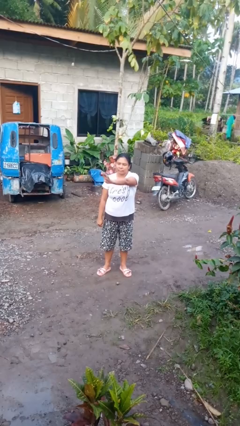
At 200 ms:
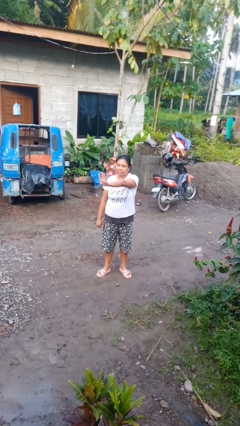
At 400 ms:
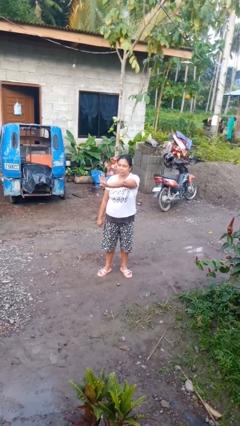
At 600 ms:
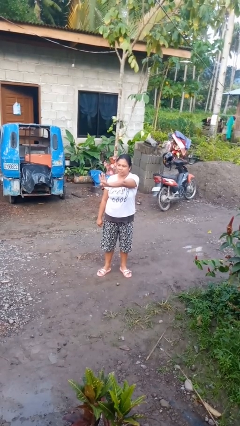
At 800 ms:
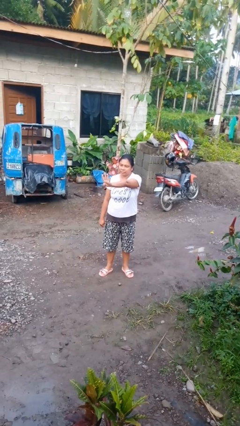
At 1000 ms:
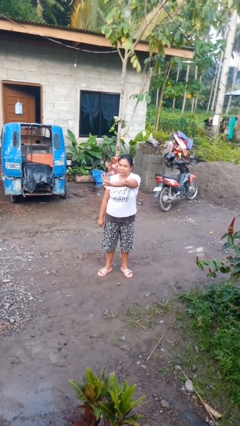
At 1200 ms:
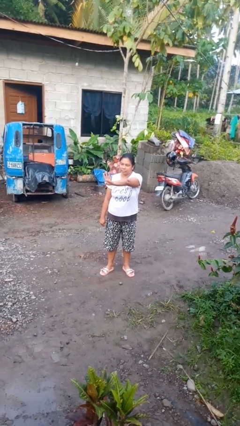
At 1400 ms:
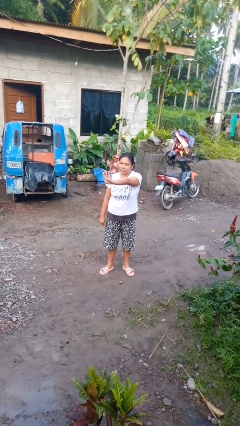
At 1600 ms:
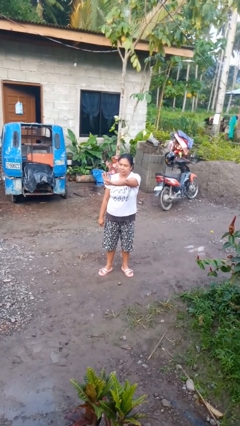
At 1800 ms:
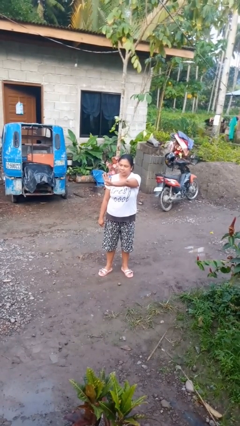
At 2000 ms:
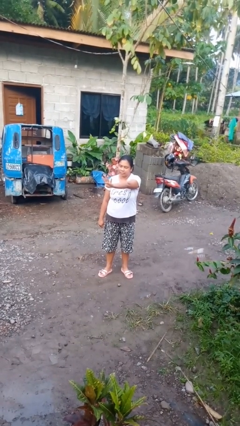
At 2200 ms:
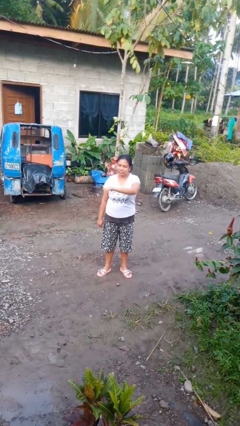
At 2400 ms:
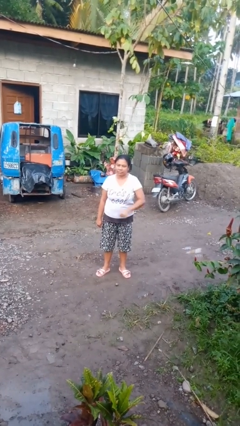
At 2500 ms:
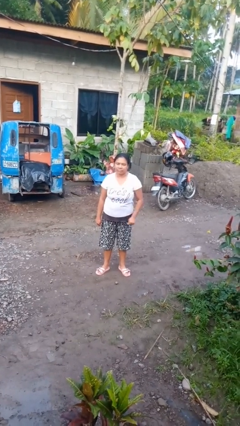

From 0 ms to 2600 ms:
person gestures number four

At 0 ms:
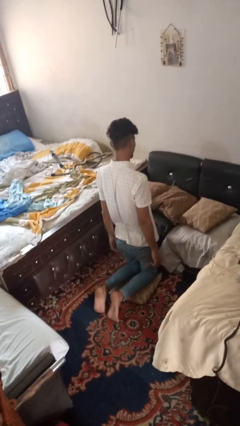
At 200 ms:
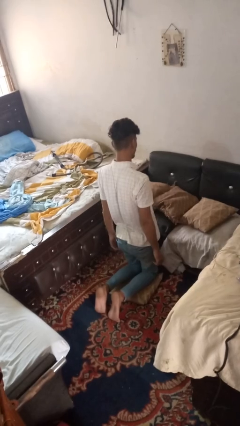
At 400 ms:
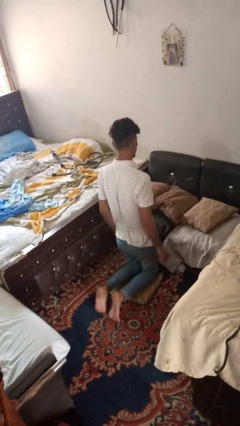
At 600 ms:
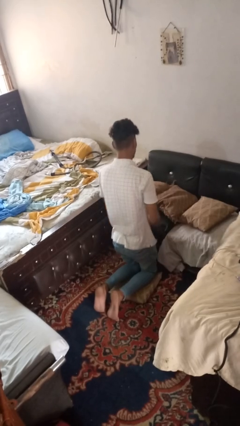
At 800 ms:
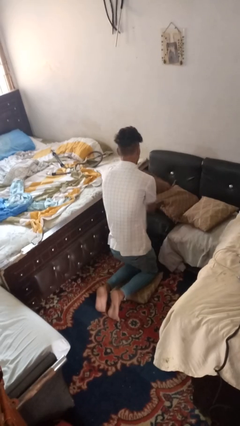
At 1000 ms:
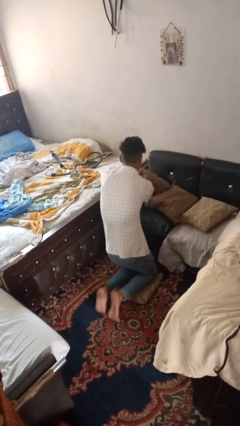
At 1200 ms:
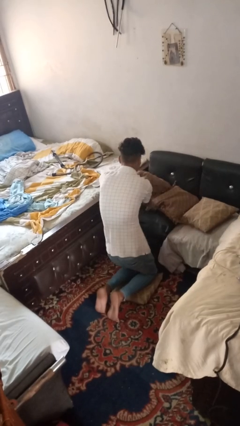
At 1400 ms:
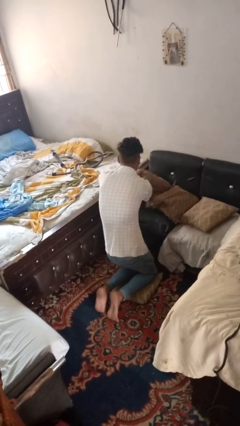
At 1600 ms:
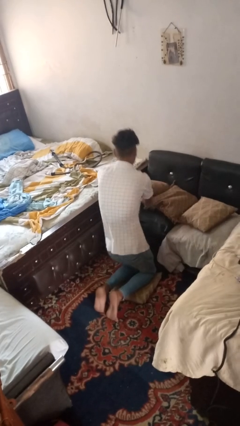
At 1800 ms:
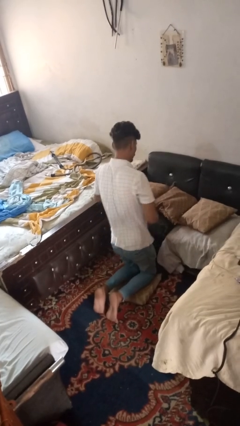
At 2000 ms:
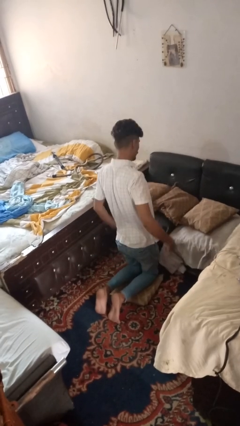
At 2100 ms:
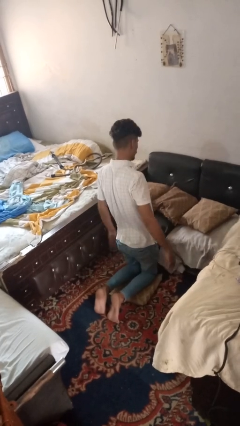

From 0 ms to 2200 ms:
person searches in couch

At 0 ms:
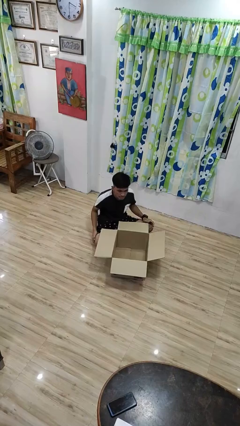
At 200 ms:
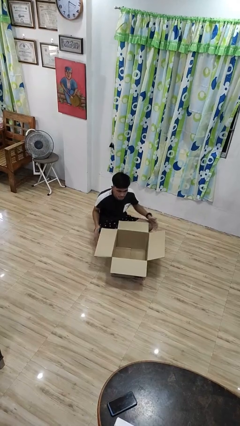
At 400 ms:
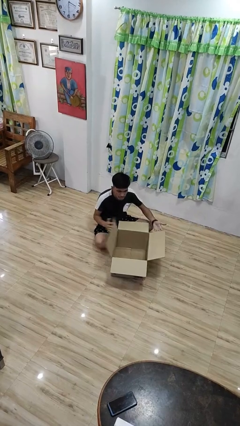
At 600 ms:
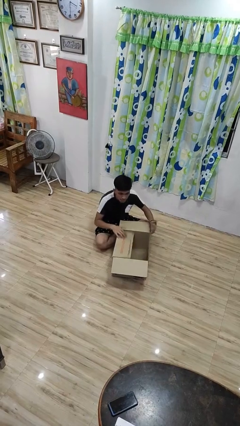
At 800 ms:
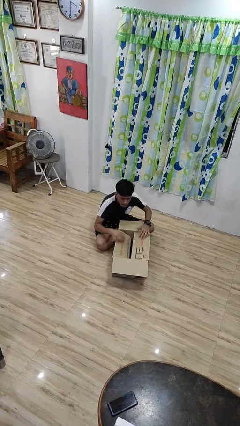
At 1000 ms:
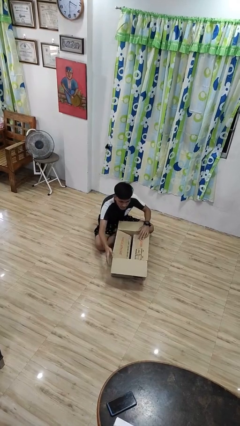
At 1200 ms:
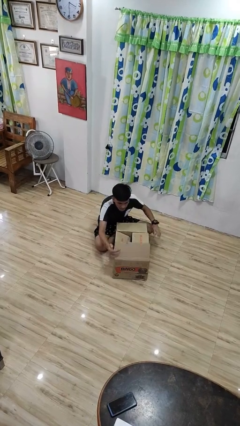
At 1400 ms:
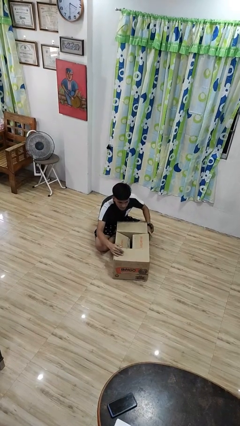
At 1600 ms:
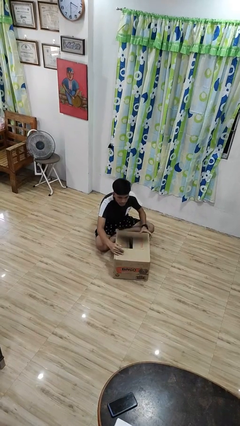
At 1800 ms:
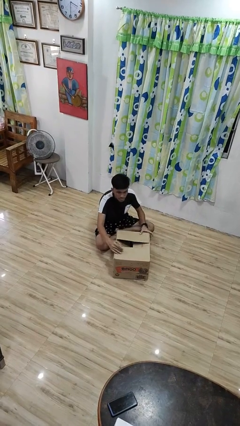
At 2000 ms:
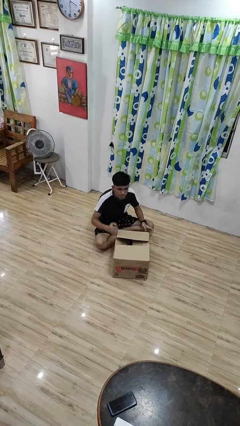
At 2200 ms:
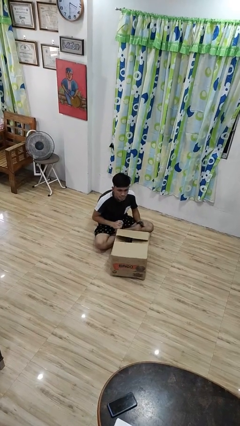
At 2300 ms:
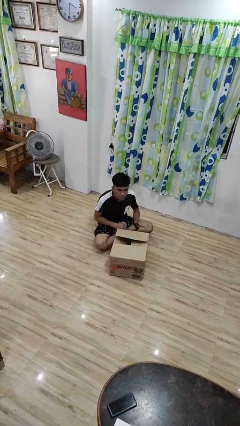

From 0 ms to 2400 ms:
person closes box

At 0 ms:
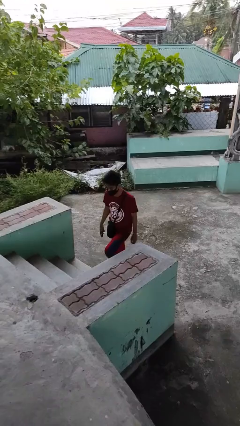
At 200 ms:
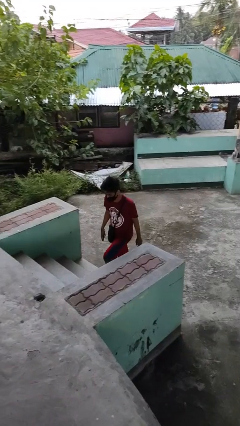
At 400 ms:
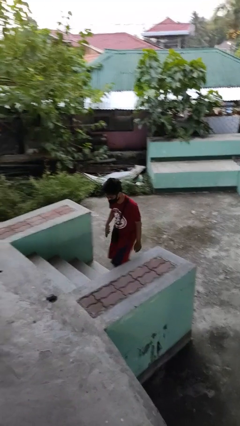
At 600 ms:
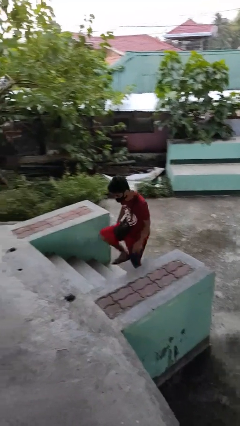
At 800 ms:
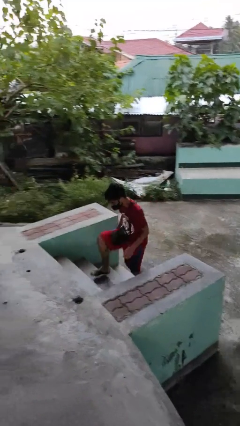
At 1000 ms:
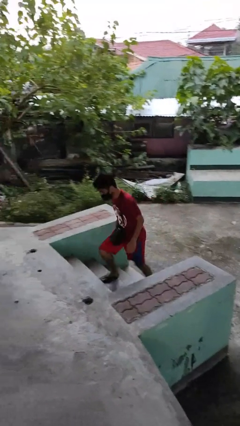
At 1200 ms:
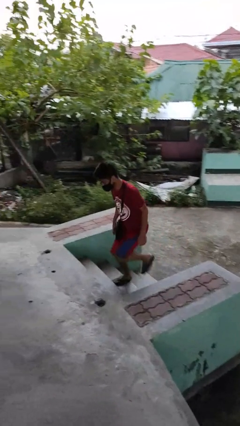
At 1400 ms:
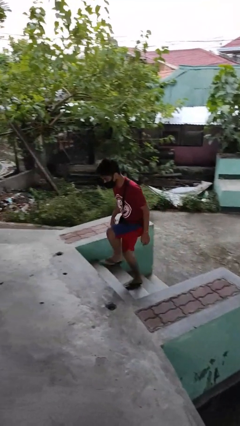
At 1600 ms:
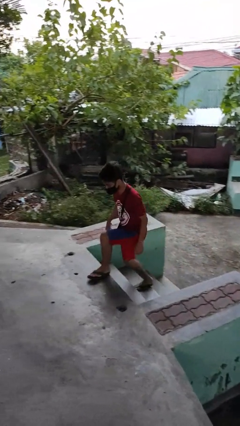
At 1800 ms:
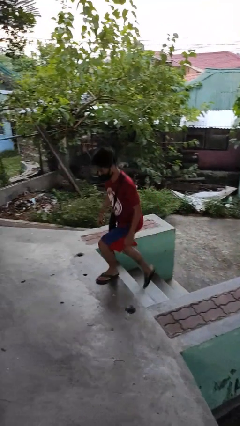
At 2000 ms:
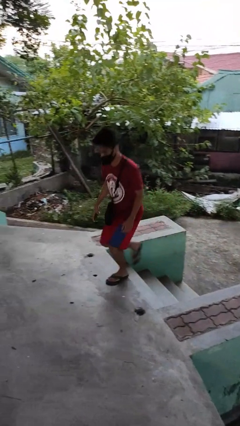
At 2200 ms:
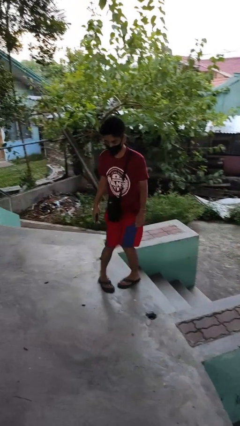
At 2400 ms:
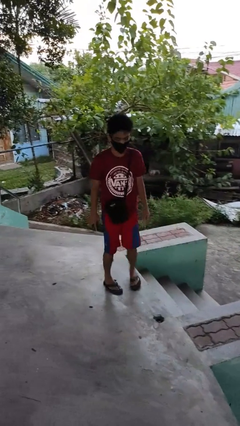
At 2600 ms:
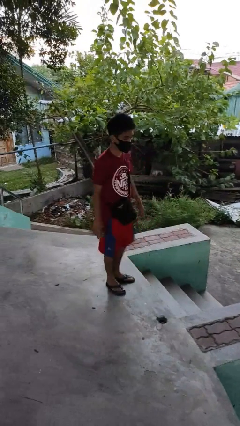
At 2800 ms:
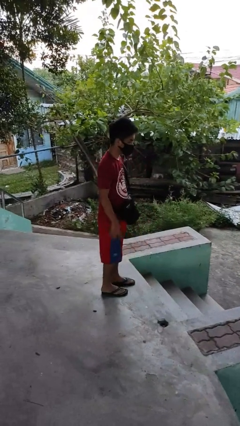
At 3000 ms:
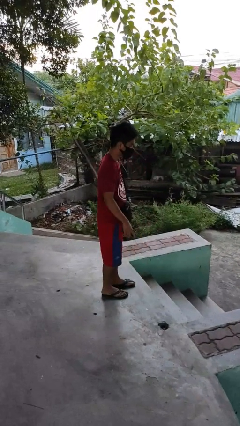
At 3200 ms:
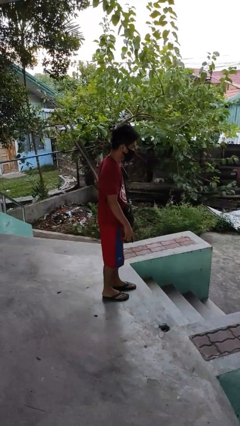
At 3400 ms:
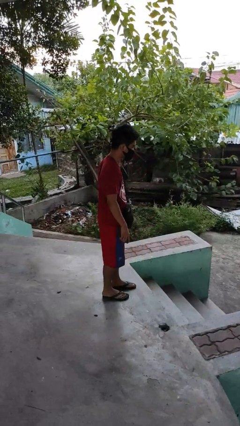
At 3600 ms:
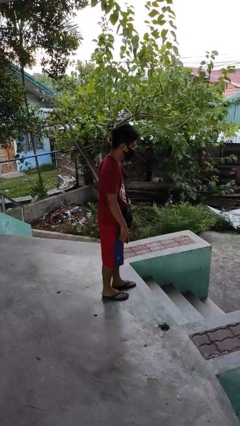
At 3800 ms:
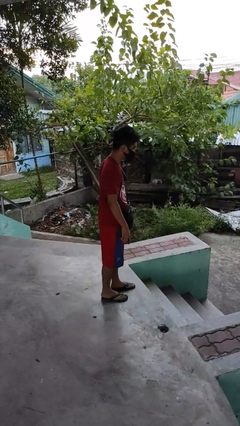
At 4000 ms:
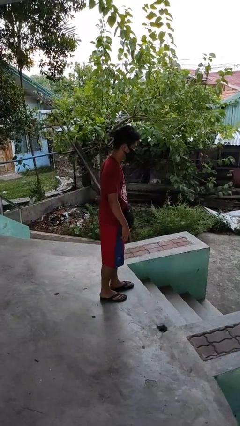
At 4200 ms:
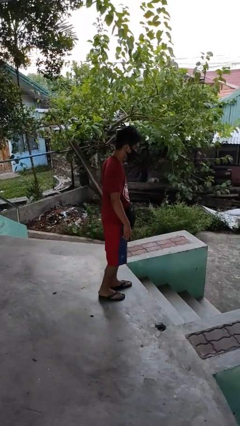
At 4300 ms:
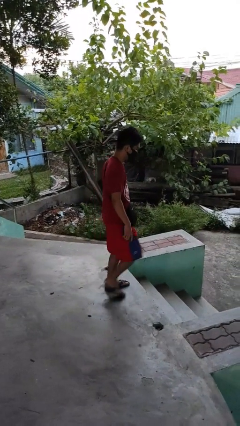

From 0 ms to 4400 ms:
person climbs up stairs

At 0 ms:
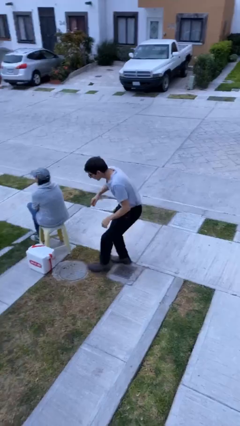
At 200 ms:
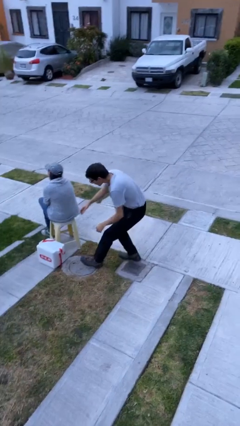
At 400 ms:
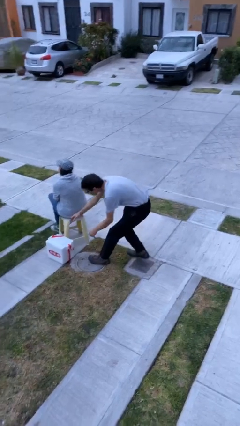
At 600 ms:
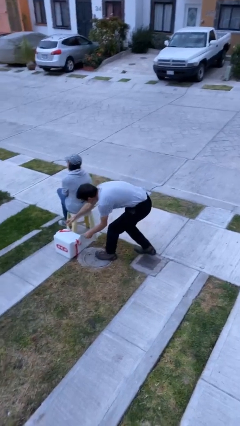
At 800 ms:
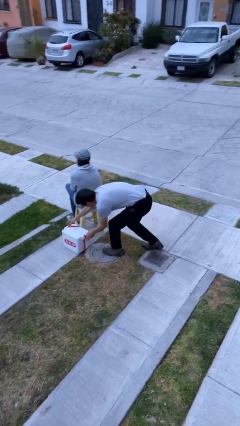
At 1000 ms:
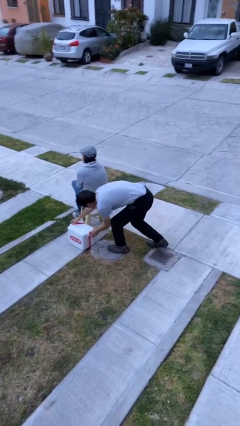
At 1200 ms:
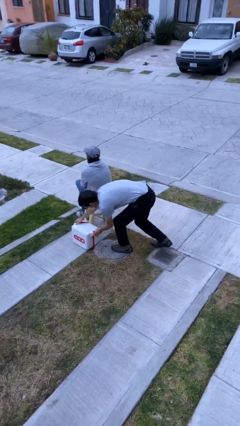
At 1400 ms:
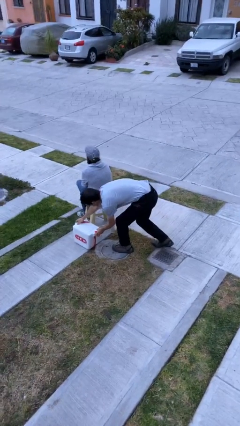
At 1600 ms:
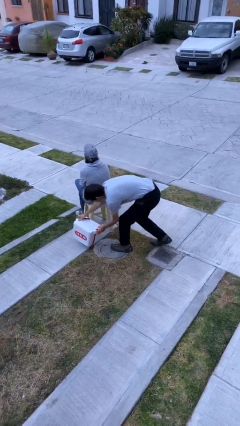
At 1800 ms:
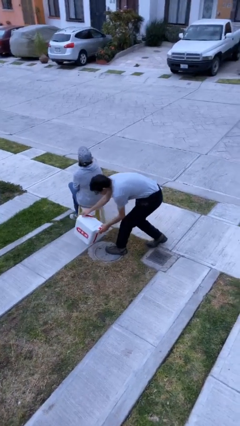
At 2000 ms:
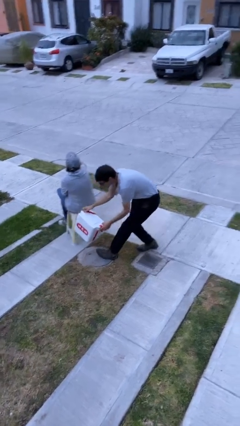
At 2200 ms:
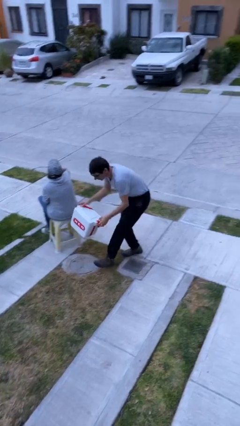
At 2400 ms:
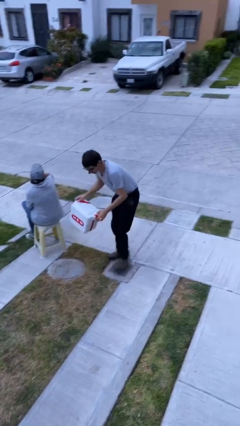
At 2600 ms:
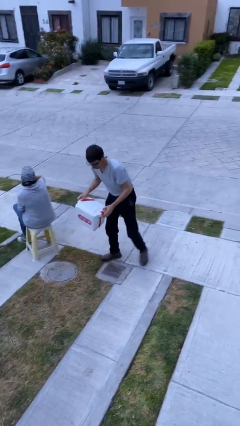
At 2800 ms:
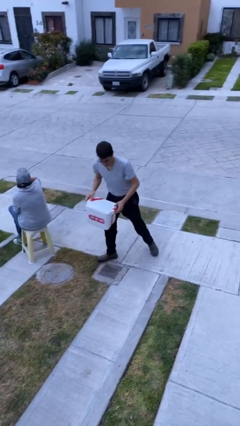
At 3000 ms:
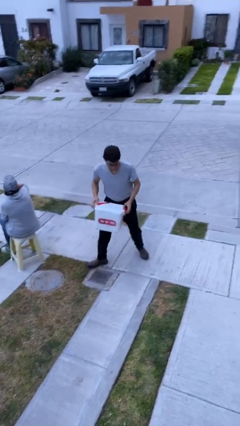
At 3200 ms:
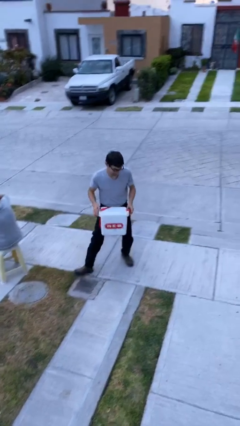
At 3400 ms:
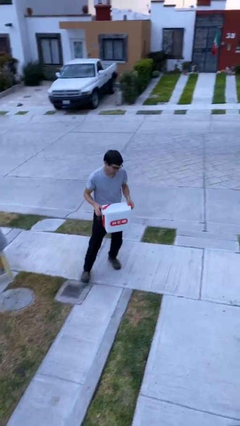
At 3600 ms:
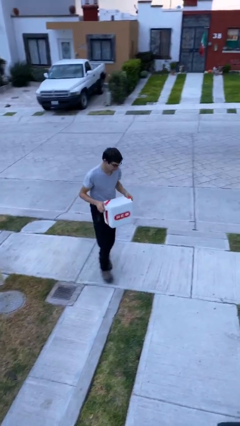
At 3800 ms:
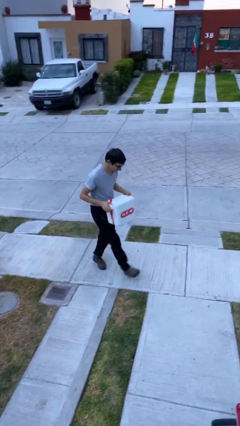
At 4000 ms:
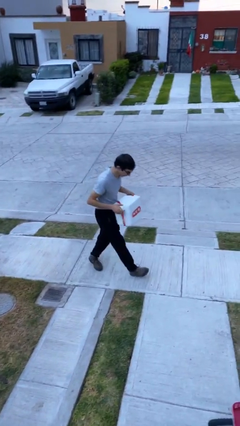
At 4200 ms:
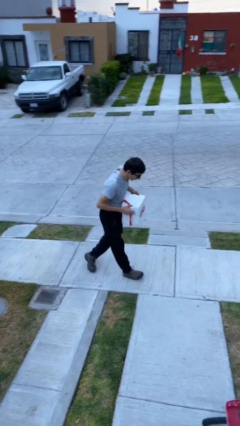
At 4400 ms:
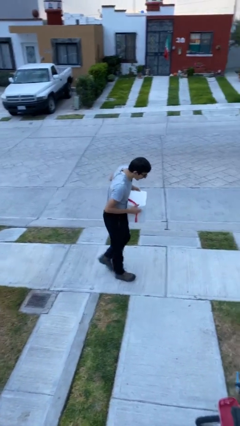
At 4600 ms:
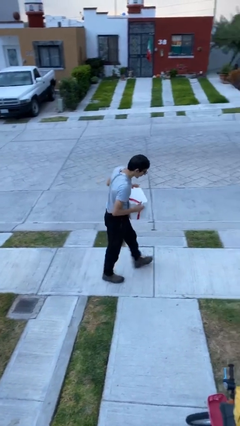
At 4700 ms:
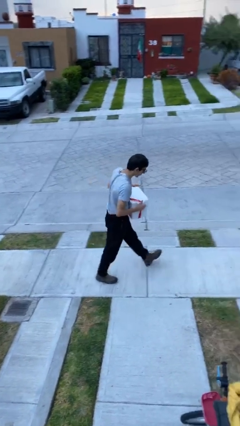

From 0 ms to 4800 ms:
person steals object from person

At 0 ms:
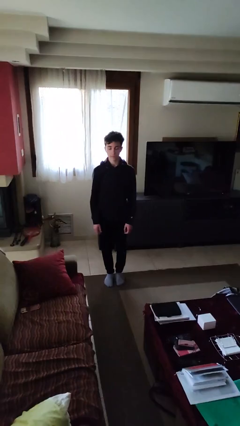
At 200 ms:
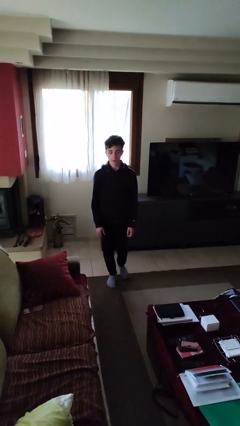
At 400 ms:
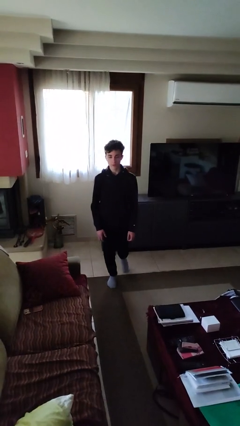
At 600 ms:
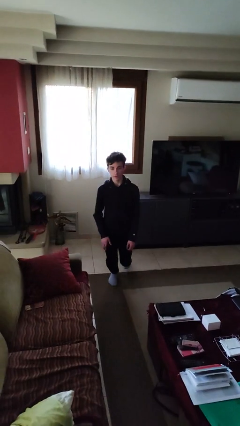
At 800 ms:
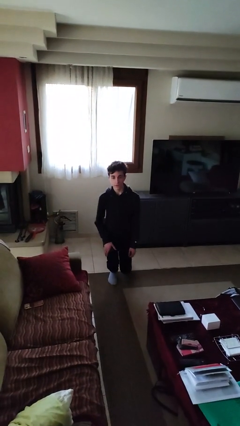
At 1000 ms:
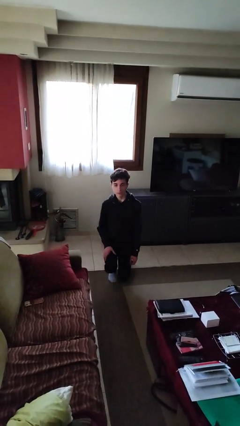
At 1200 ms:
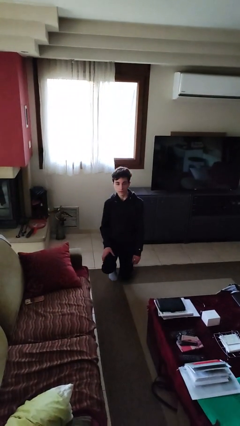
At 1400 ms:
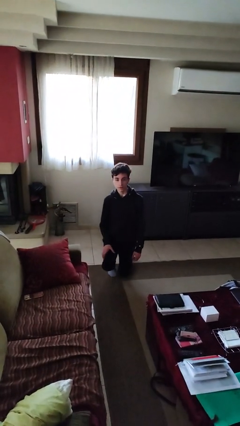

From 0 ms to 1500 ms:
person kneels
